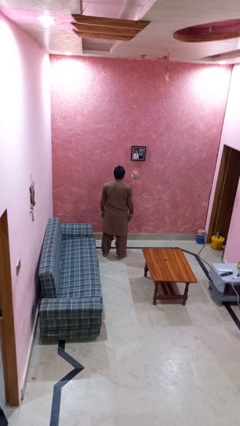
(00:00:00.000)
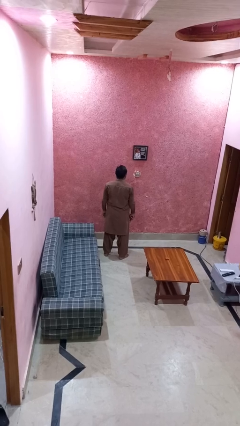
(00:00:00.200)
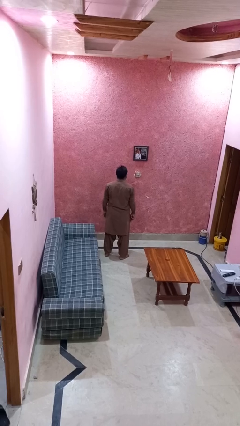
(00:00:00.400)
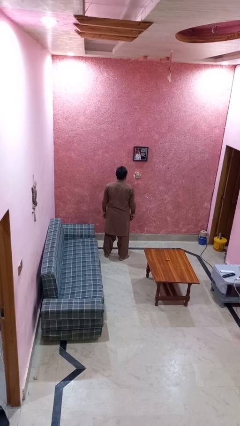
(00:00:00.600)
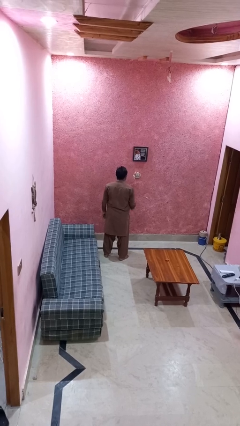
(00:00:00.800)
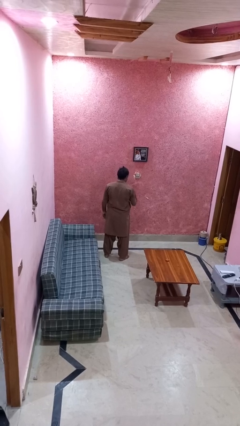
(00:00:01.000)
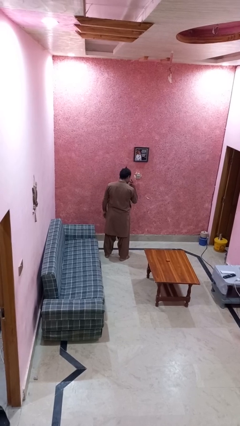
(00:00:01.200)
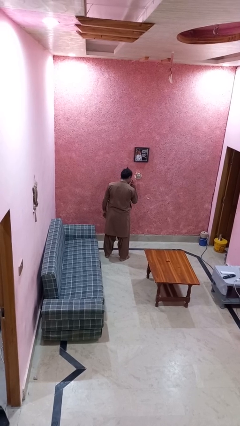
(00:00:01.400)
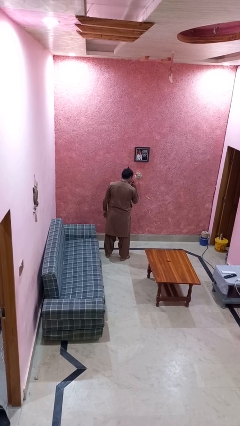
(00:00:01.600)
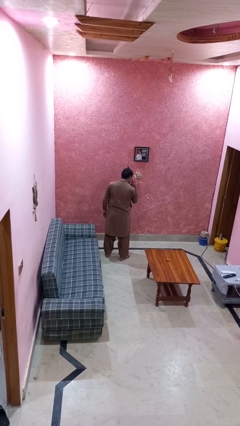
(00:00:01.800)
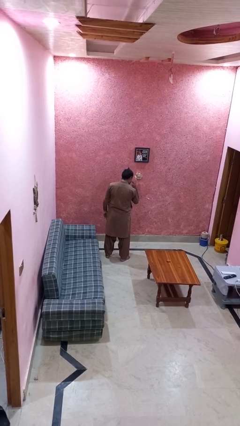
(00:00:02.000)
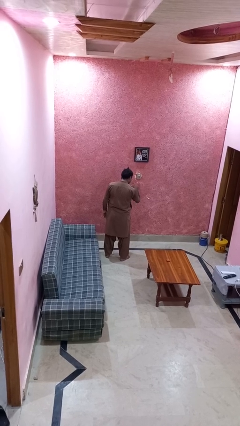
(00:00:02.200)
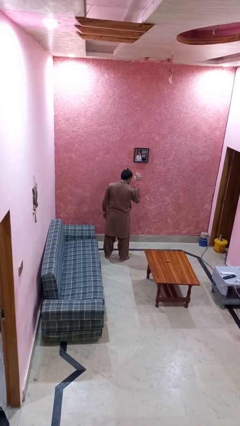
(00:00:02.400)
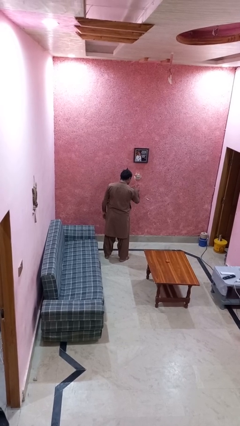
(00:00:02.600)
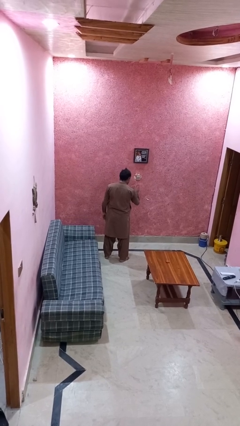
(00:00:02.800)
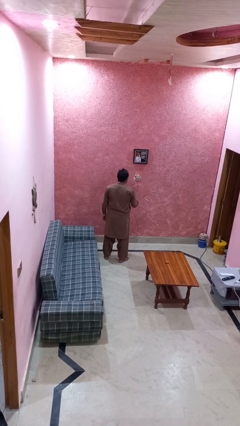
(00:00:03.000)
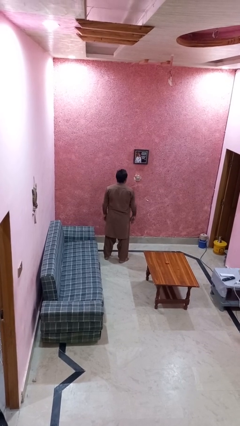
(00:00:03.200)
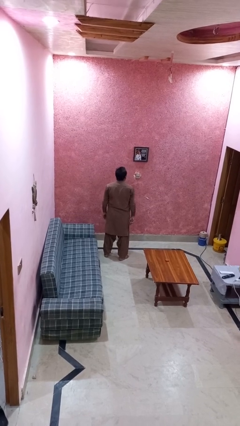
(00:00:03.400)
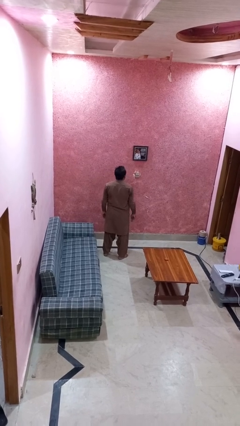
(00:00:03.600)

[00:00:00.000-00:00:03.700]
person gestures watch closely

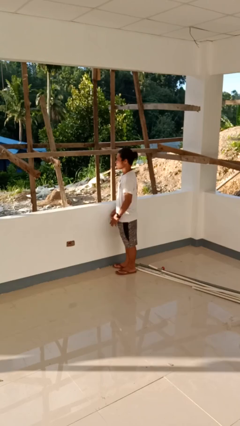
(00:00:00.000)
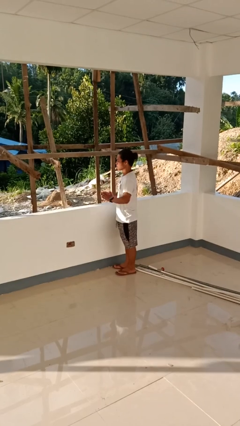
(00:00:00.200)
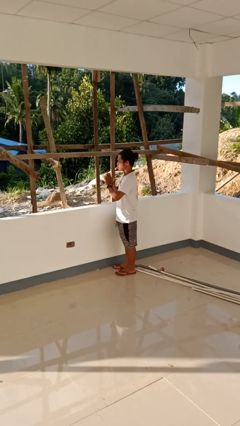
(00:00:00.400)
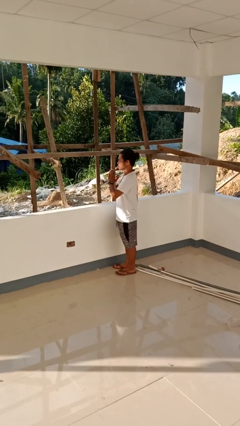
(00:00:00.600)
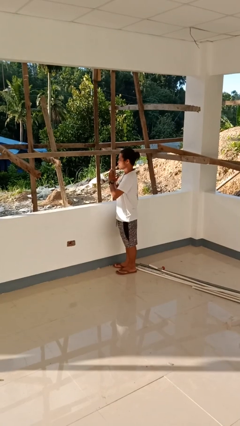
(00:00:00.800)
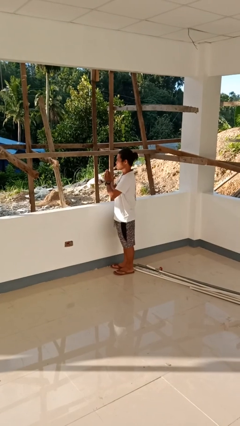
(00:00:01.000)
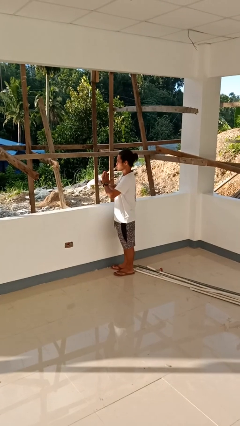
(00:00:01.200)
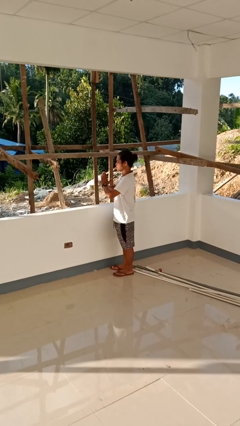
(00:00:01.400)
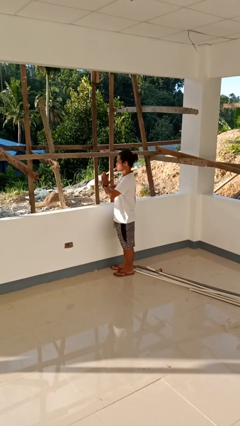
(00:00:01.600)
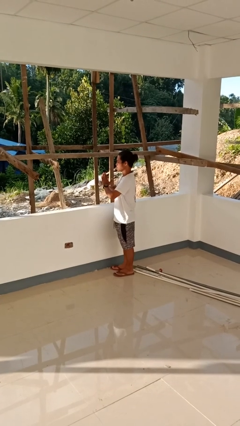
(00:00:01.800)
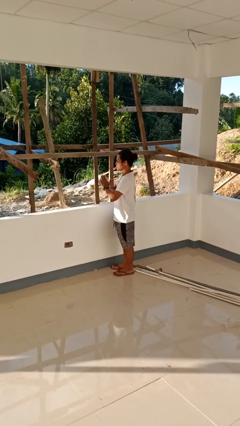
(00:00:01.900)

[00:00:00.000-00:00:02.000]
person prays

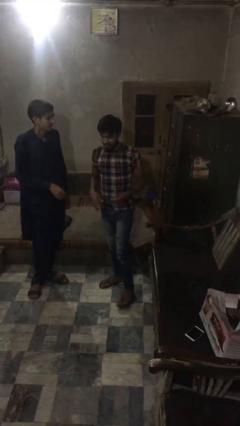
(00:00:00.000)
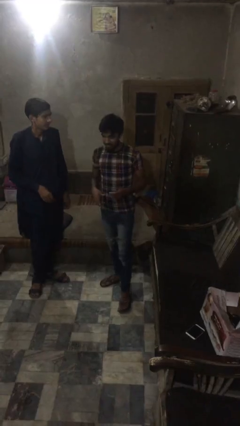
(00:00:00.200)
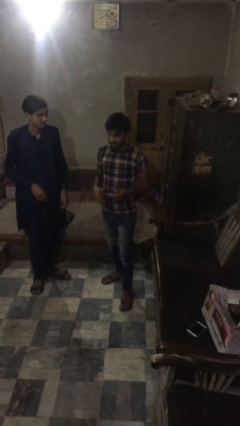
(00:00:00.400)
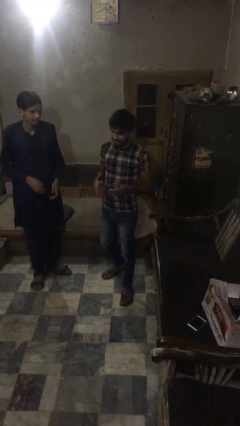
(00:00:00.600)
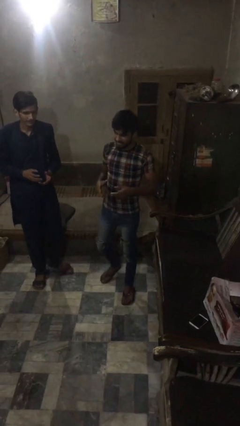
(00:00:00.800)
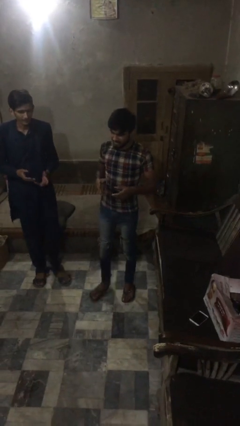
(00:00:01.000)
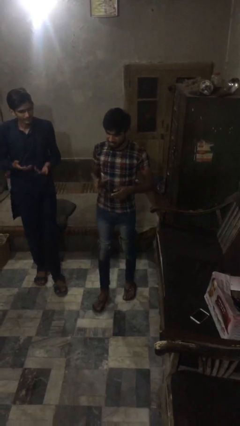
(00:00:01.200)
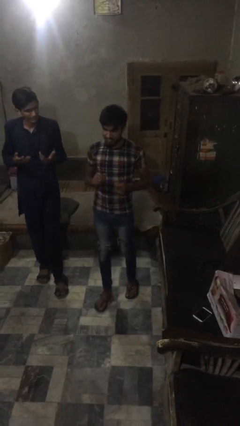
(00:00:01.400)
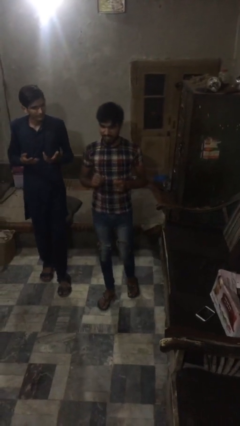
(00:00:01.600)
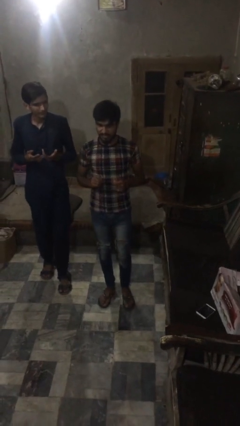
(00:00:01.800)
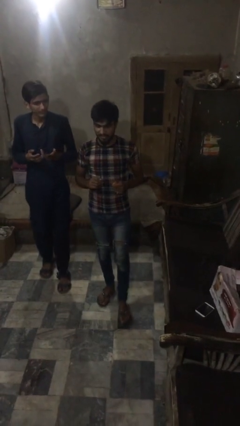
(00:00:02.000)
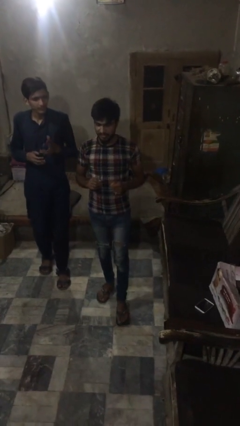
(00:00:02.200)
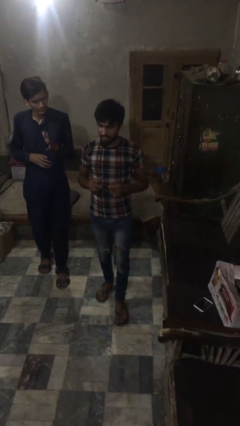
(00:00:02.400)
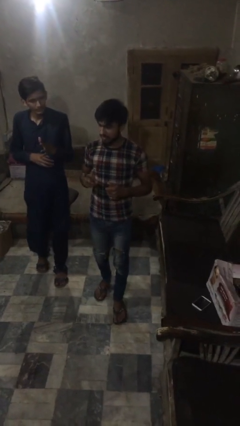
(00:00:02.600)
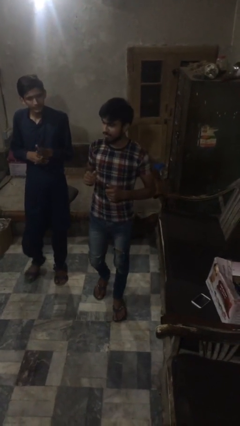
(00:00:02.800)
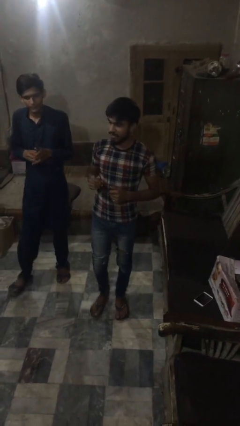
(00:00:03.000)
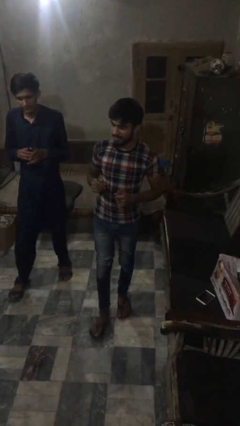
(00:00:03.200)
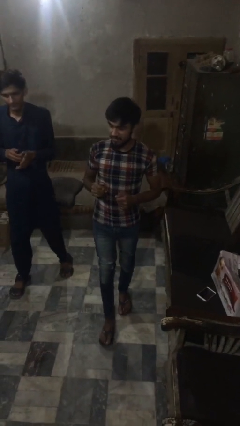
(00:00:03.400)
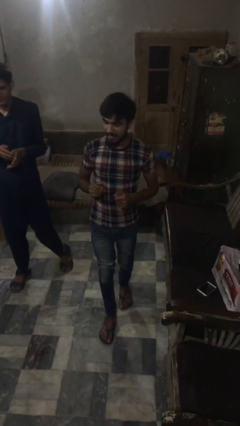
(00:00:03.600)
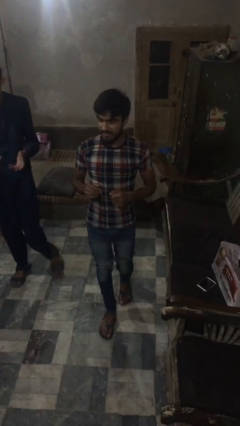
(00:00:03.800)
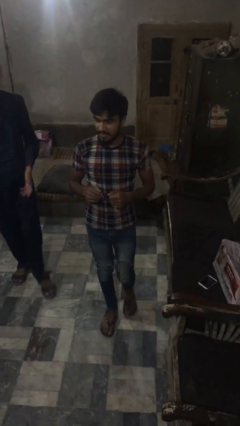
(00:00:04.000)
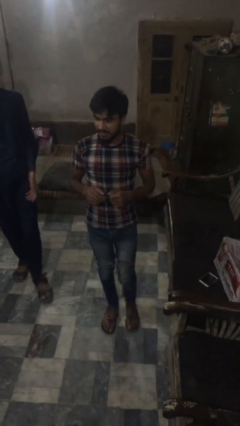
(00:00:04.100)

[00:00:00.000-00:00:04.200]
person talks to person

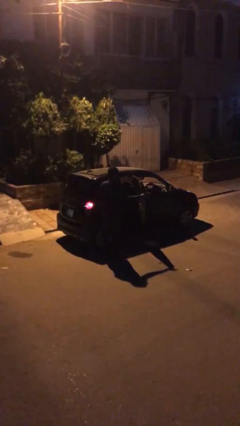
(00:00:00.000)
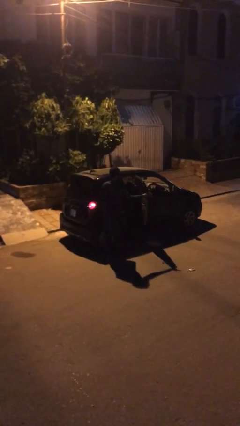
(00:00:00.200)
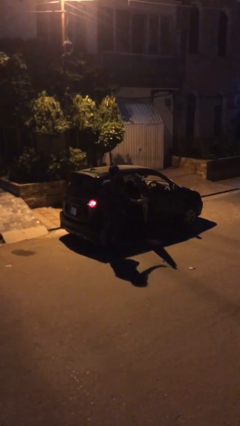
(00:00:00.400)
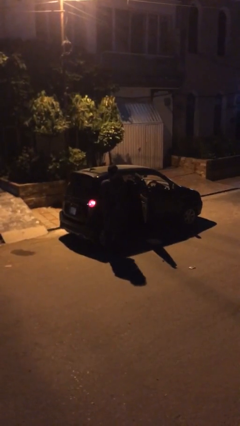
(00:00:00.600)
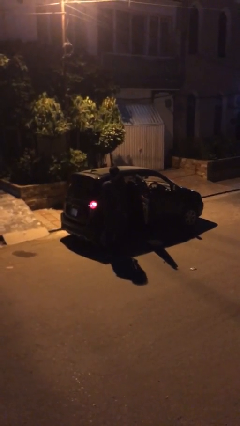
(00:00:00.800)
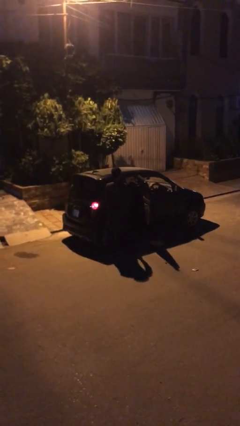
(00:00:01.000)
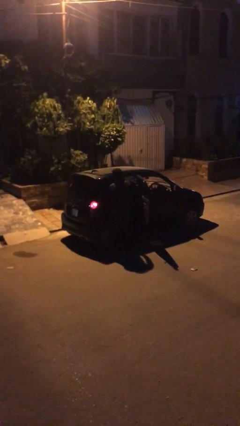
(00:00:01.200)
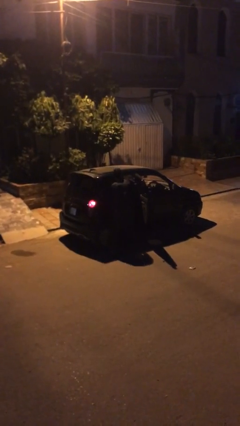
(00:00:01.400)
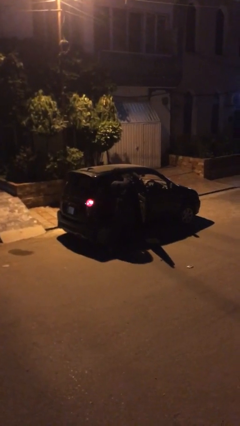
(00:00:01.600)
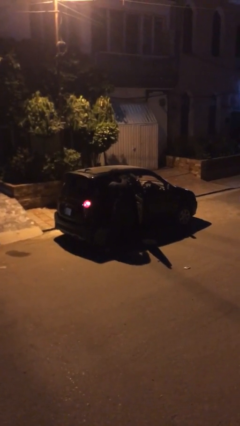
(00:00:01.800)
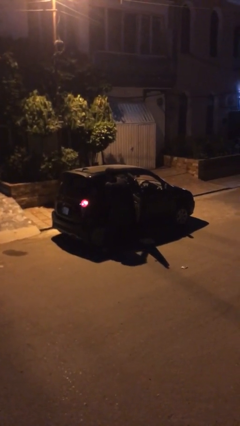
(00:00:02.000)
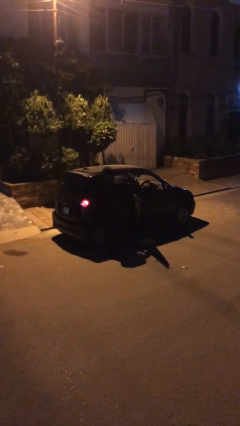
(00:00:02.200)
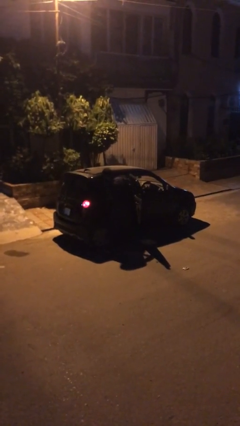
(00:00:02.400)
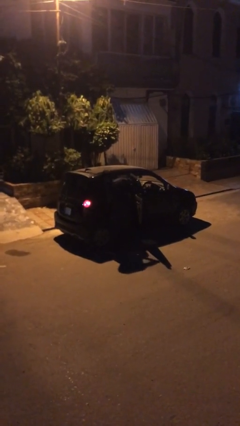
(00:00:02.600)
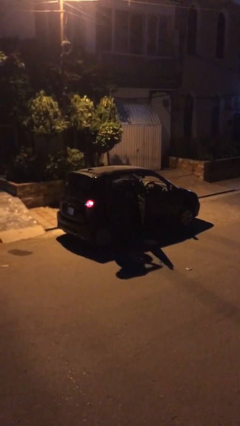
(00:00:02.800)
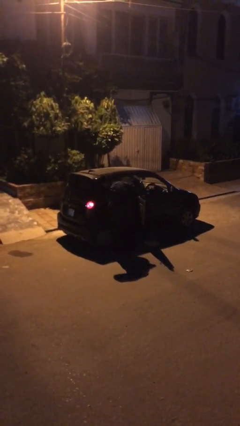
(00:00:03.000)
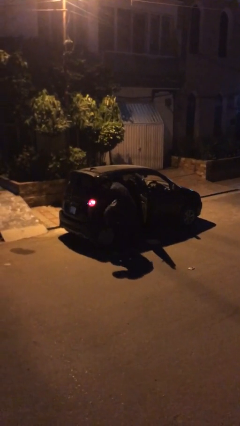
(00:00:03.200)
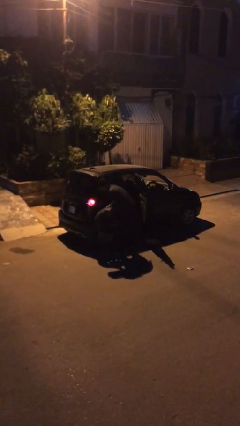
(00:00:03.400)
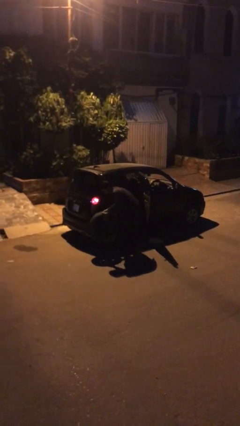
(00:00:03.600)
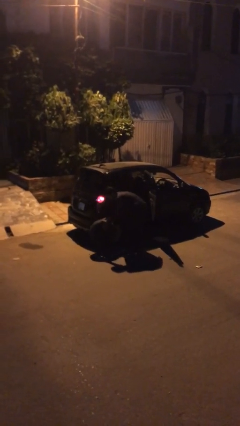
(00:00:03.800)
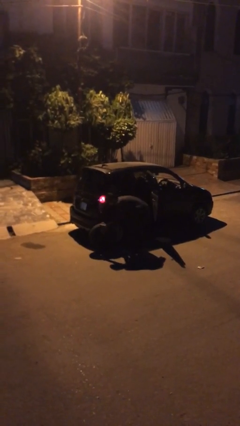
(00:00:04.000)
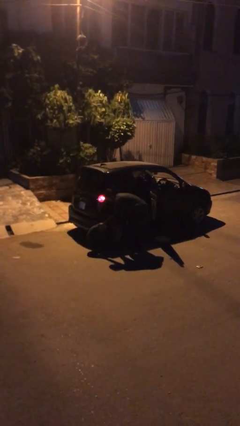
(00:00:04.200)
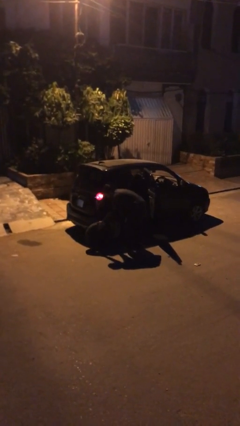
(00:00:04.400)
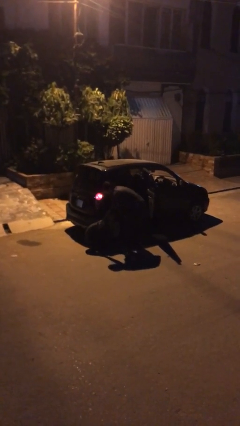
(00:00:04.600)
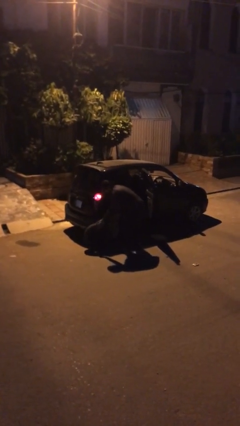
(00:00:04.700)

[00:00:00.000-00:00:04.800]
person unloads car

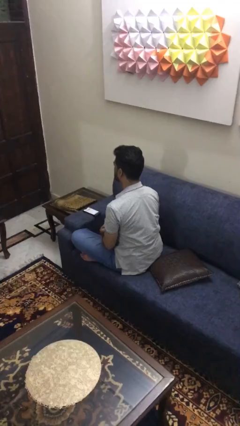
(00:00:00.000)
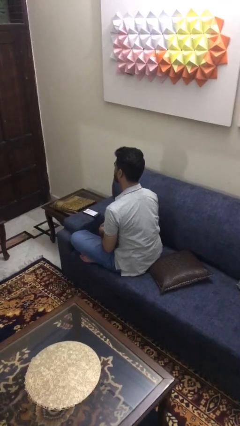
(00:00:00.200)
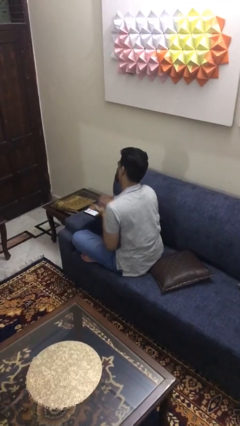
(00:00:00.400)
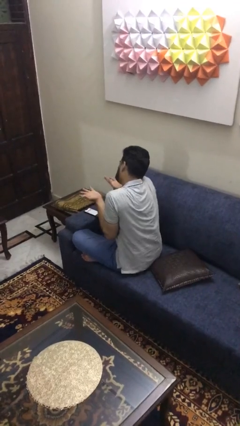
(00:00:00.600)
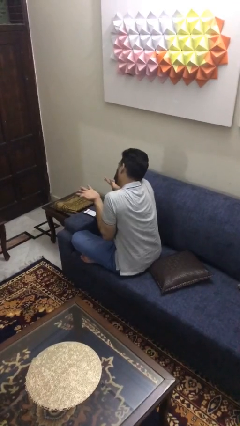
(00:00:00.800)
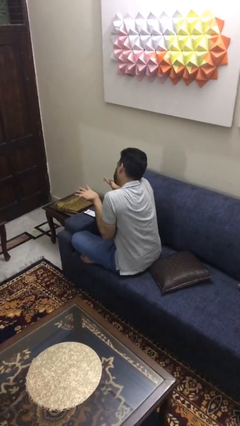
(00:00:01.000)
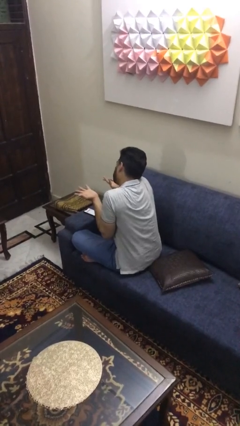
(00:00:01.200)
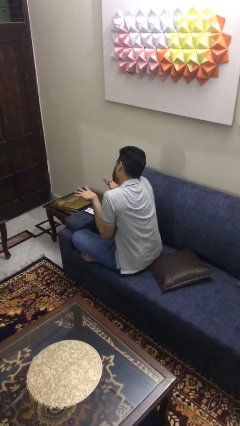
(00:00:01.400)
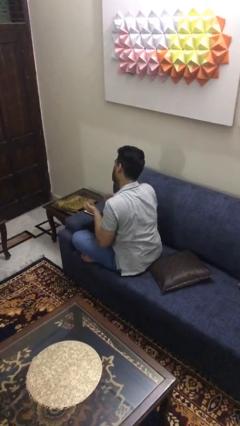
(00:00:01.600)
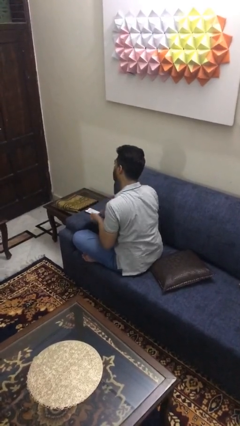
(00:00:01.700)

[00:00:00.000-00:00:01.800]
person shrugs

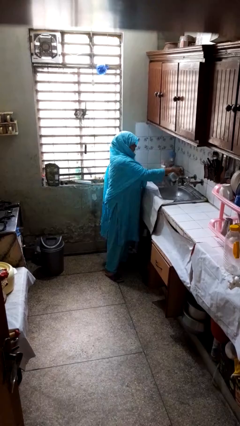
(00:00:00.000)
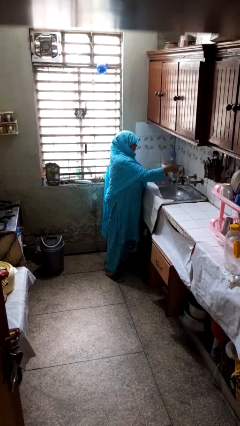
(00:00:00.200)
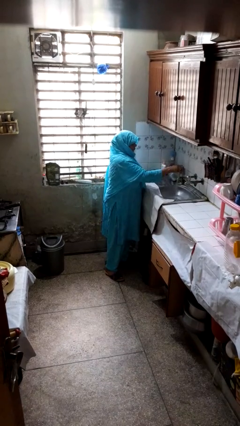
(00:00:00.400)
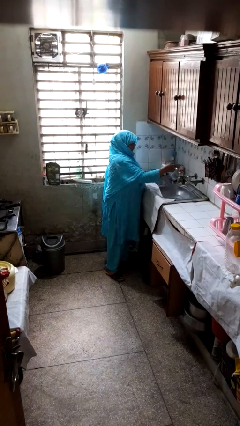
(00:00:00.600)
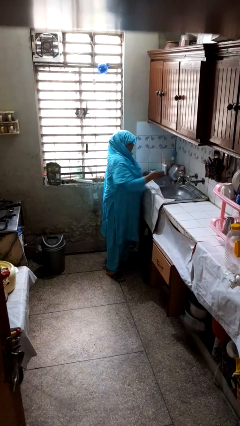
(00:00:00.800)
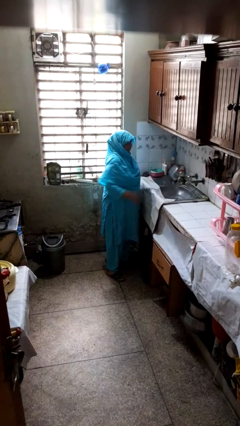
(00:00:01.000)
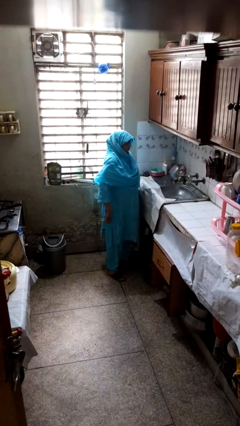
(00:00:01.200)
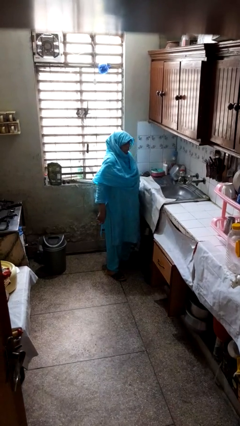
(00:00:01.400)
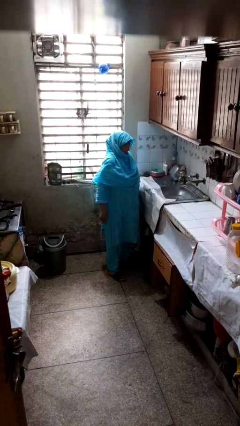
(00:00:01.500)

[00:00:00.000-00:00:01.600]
person turns off faucet
